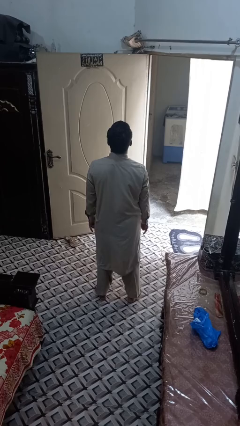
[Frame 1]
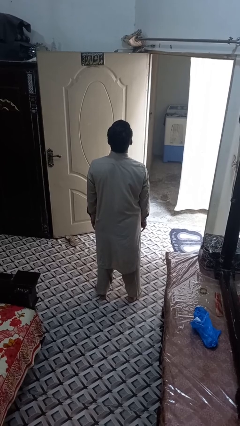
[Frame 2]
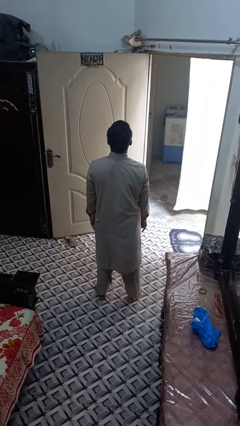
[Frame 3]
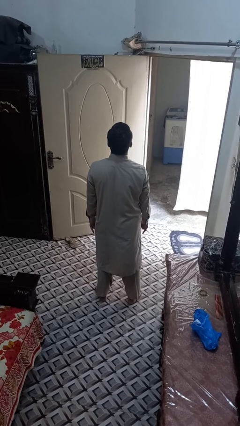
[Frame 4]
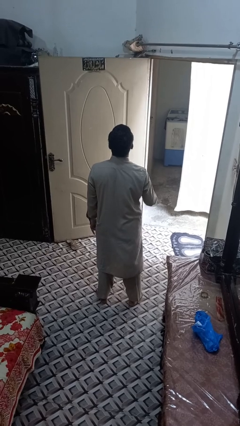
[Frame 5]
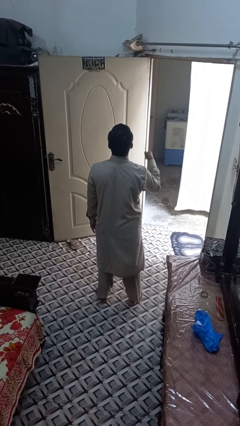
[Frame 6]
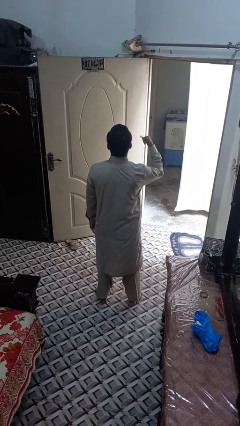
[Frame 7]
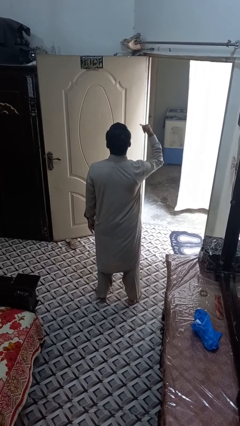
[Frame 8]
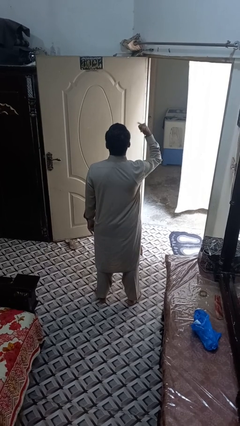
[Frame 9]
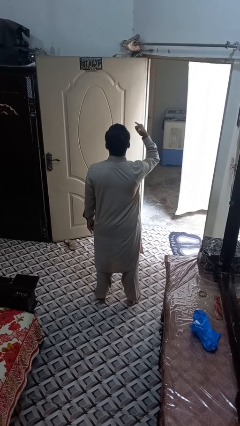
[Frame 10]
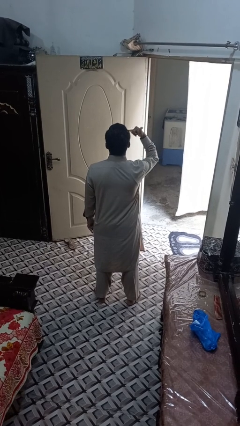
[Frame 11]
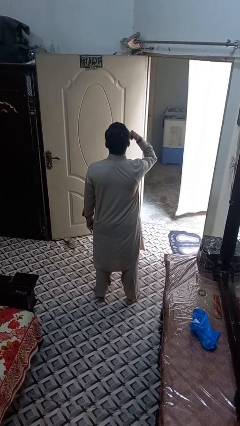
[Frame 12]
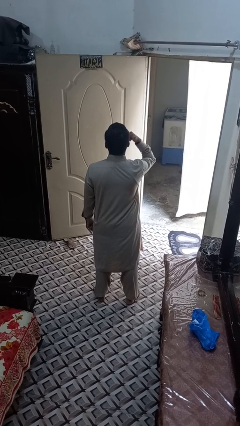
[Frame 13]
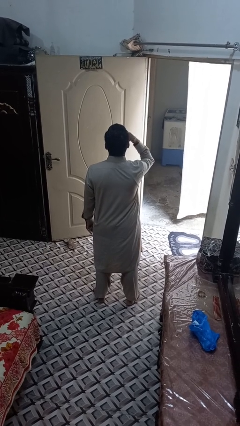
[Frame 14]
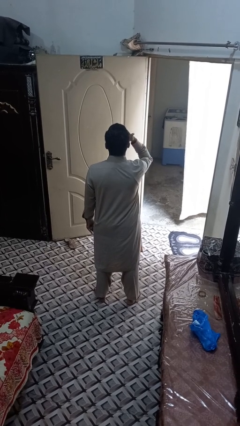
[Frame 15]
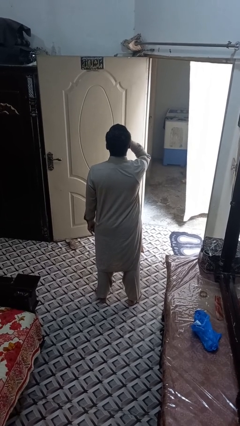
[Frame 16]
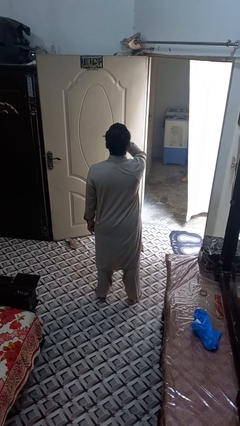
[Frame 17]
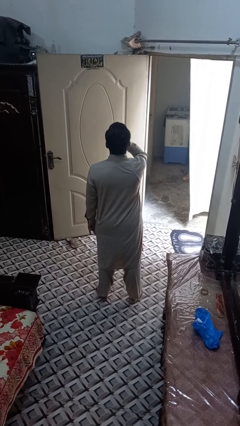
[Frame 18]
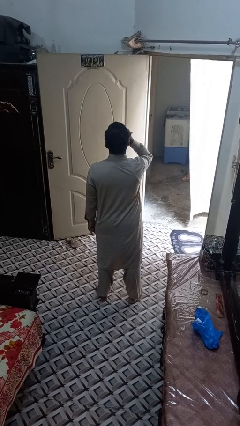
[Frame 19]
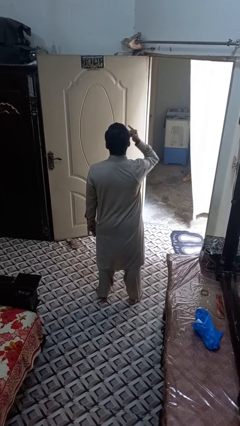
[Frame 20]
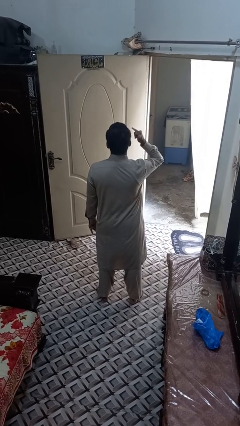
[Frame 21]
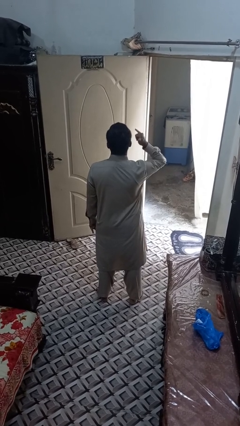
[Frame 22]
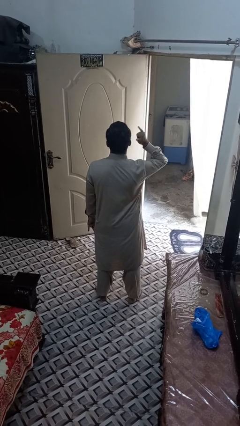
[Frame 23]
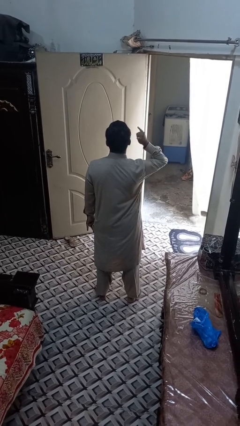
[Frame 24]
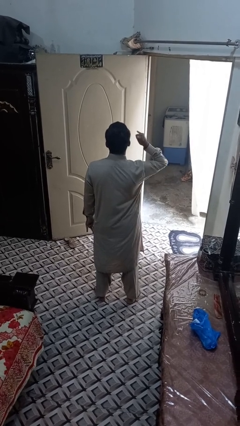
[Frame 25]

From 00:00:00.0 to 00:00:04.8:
person gestures hang loose

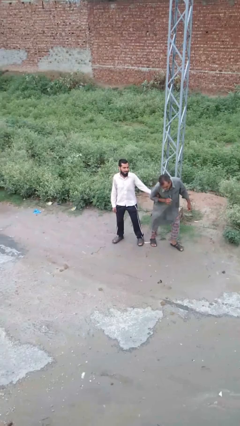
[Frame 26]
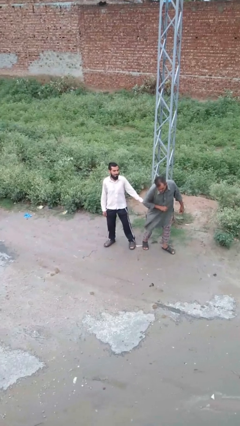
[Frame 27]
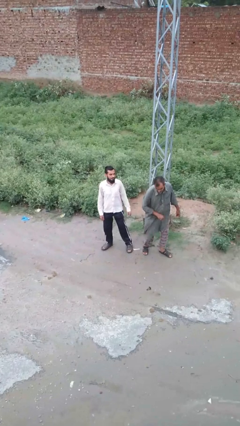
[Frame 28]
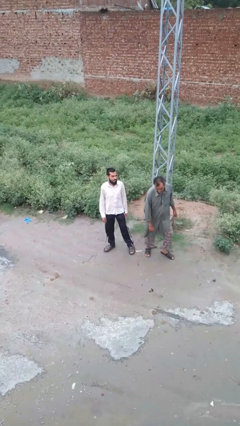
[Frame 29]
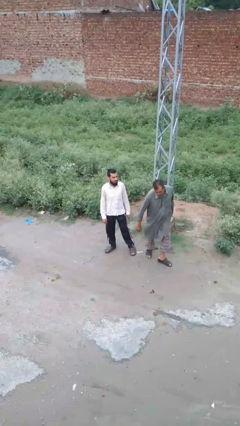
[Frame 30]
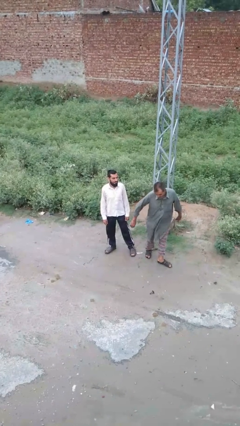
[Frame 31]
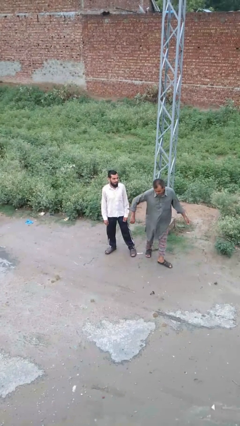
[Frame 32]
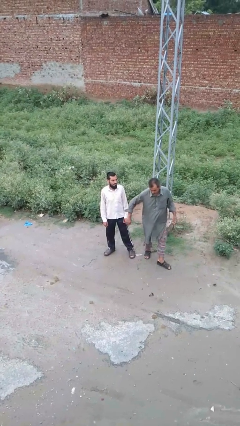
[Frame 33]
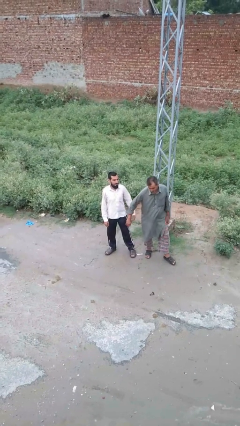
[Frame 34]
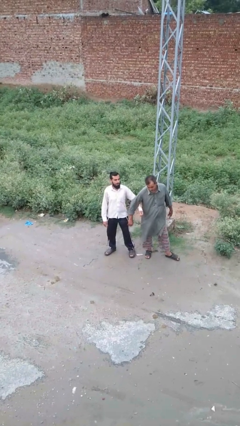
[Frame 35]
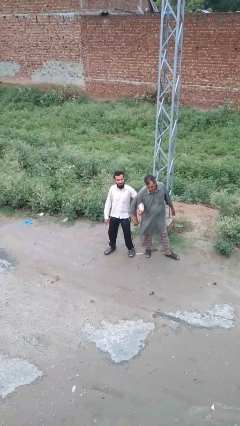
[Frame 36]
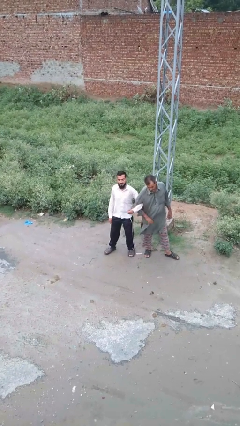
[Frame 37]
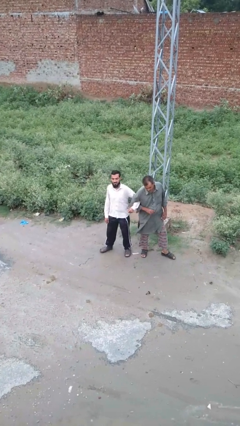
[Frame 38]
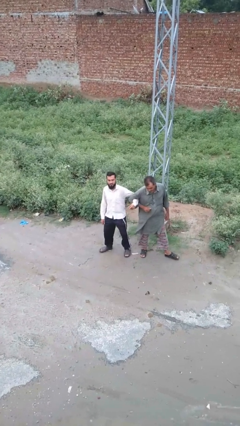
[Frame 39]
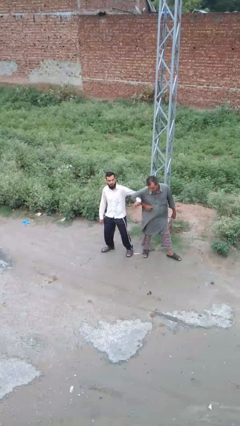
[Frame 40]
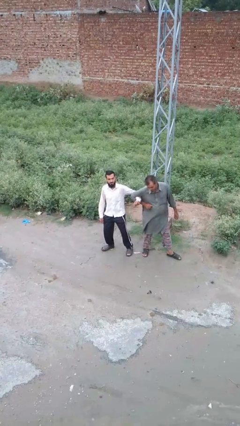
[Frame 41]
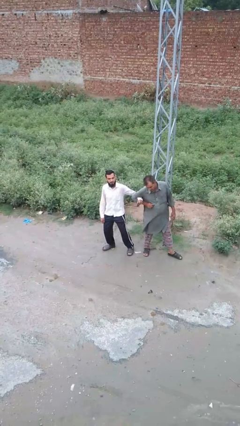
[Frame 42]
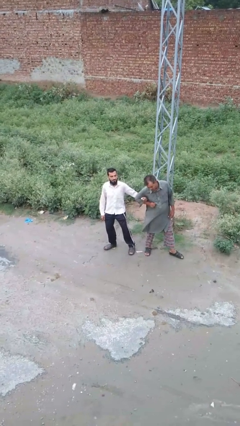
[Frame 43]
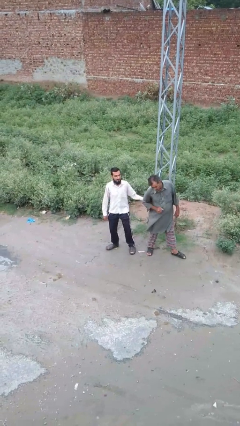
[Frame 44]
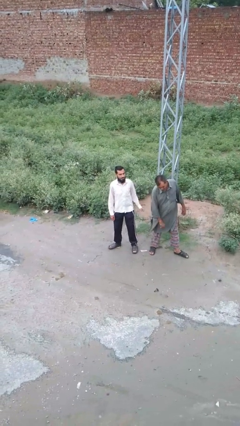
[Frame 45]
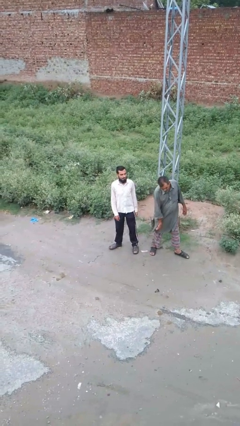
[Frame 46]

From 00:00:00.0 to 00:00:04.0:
person grabs person by forearm

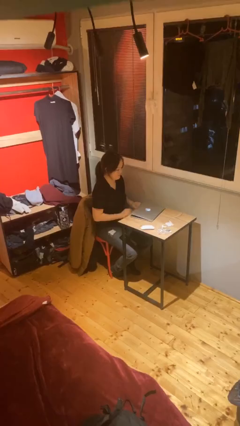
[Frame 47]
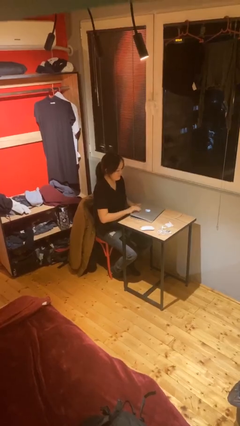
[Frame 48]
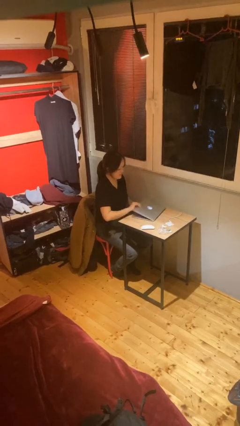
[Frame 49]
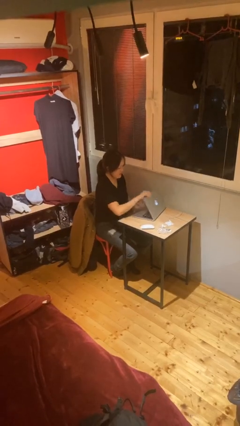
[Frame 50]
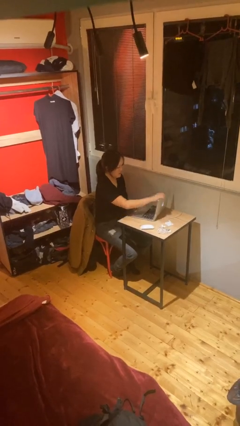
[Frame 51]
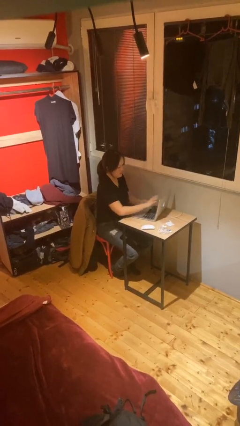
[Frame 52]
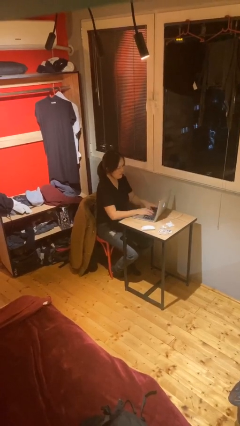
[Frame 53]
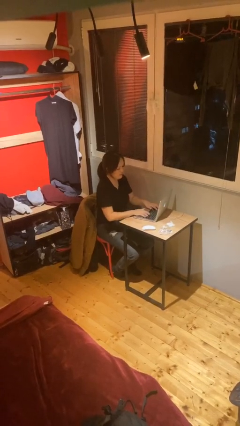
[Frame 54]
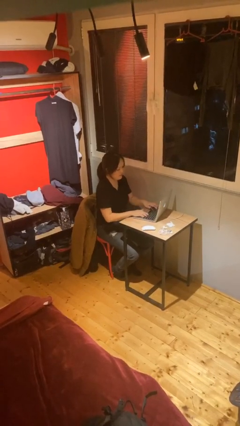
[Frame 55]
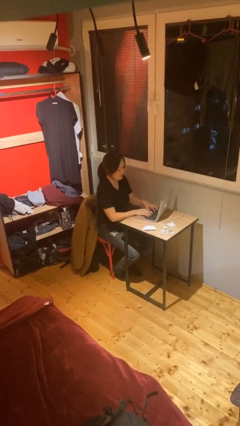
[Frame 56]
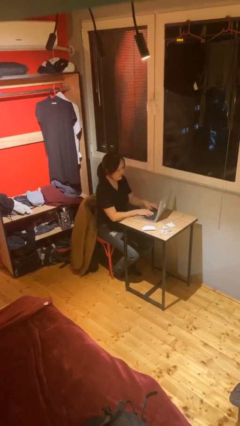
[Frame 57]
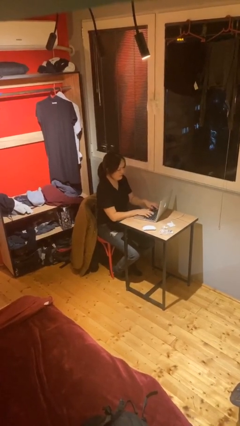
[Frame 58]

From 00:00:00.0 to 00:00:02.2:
person interacts with laptop

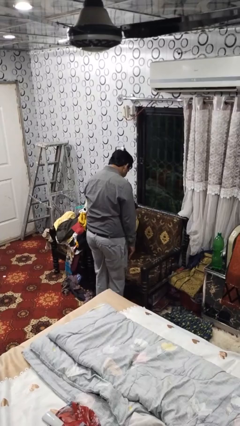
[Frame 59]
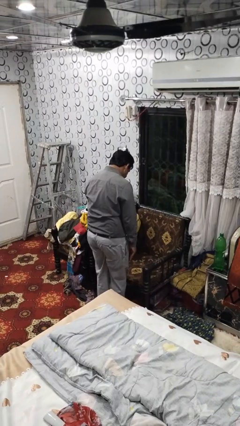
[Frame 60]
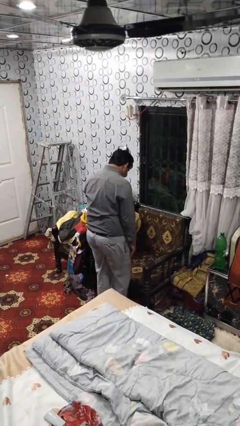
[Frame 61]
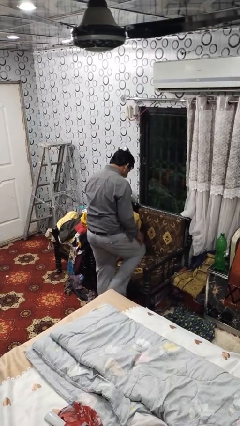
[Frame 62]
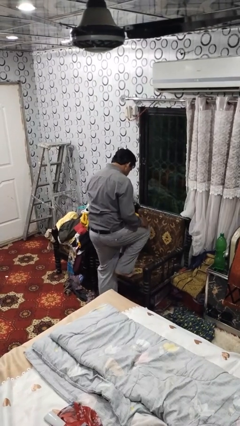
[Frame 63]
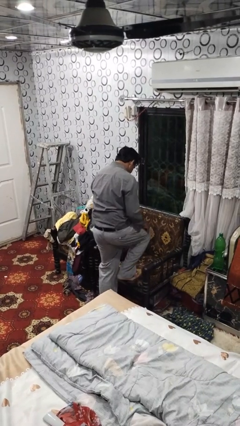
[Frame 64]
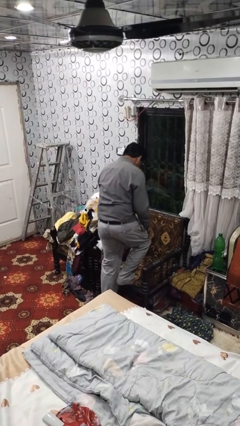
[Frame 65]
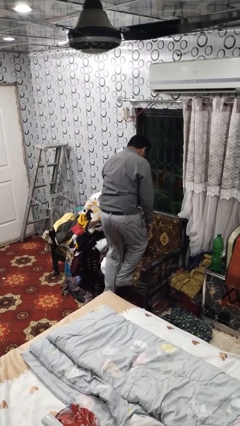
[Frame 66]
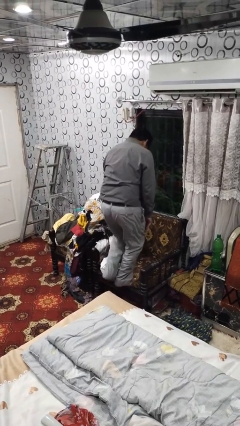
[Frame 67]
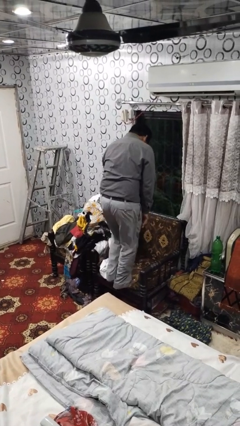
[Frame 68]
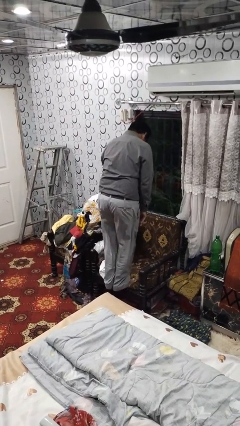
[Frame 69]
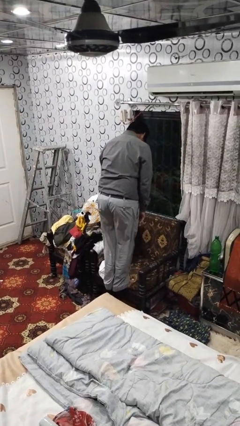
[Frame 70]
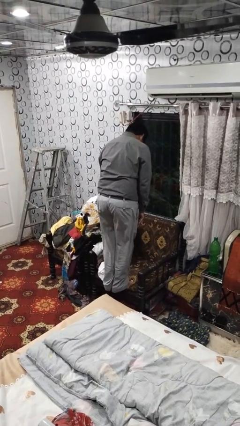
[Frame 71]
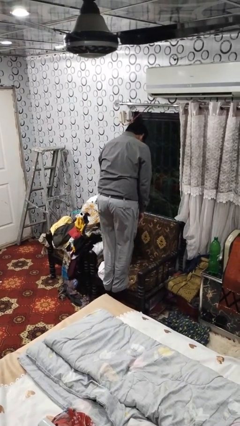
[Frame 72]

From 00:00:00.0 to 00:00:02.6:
person climbs on couch

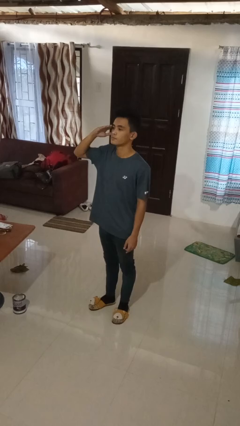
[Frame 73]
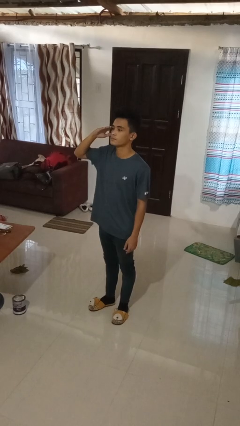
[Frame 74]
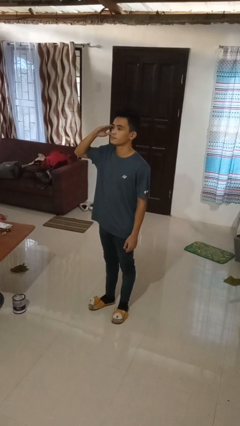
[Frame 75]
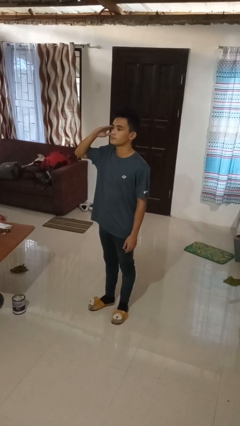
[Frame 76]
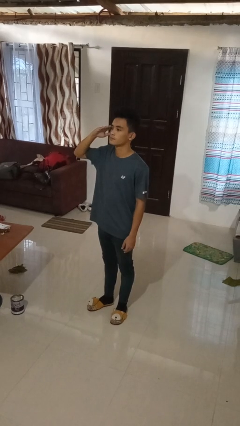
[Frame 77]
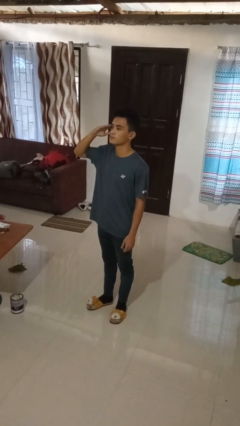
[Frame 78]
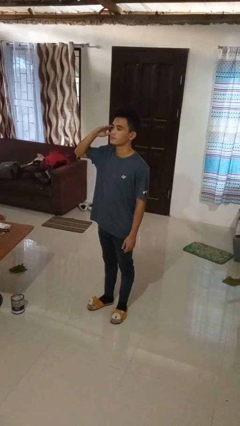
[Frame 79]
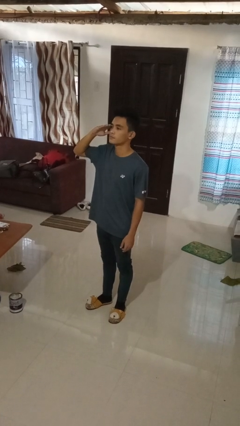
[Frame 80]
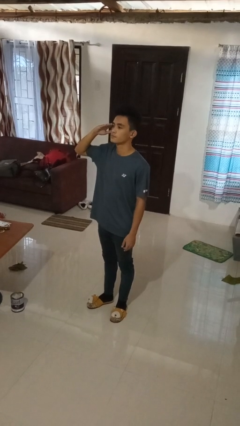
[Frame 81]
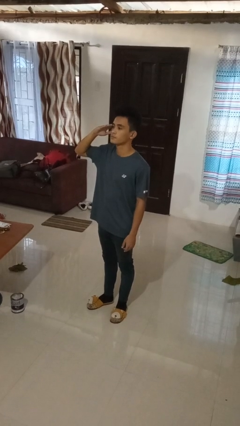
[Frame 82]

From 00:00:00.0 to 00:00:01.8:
person salutes

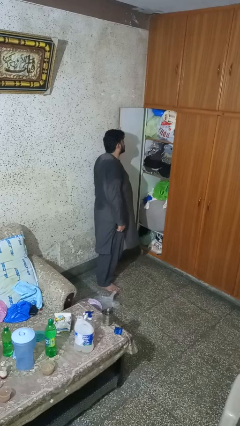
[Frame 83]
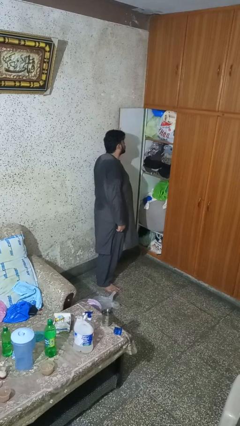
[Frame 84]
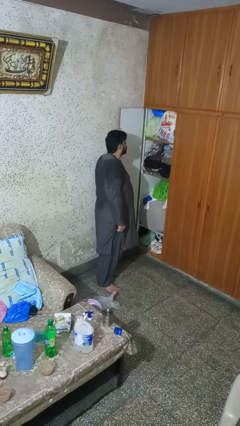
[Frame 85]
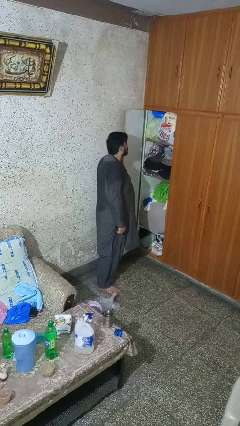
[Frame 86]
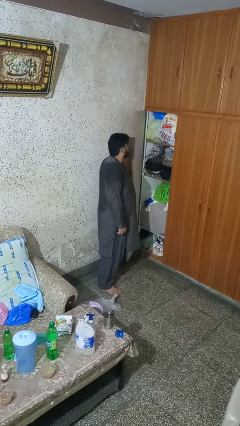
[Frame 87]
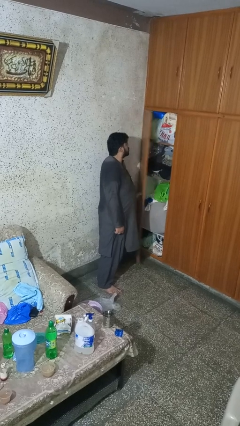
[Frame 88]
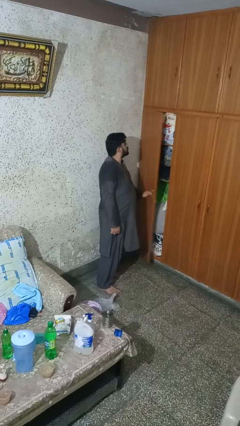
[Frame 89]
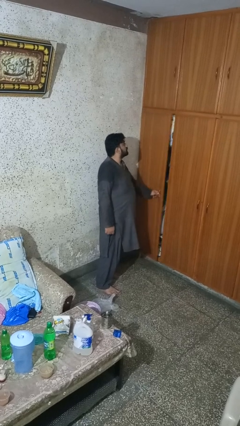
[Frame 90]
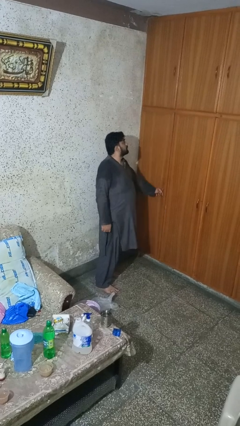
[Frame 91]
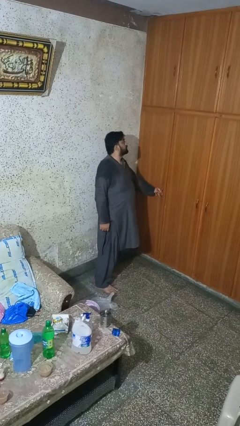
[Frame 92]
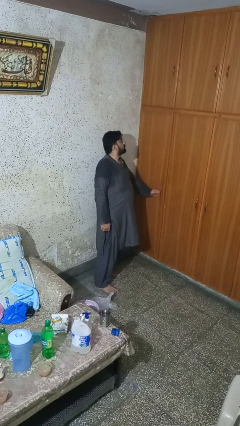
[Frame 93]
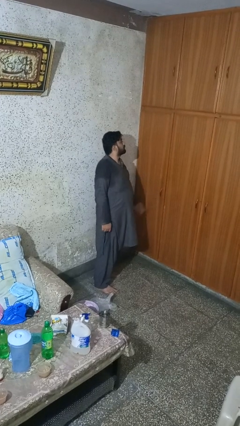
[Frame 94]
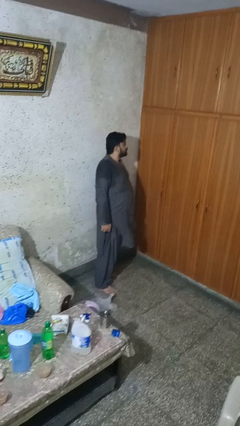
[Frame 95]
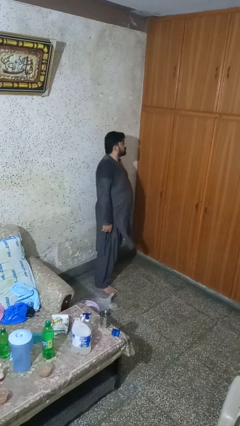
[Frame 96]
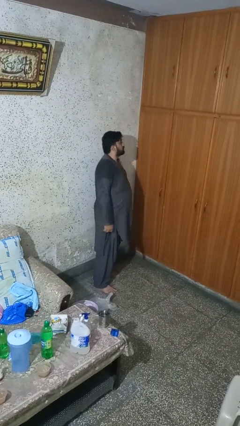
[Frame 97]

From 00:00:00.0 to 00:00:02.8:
person closes closet door
